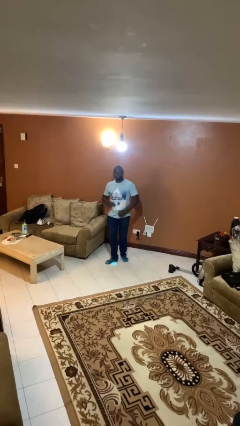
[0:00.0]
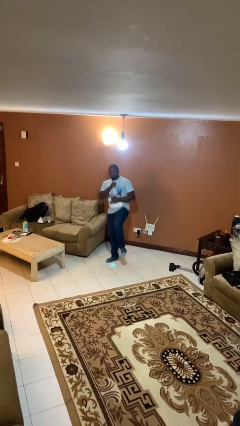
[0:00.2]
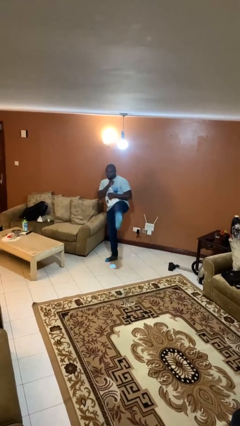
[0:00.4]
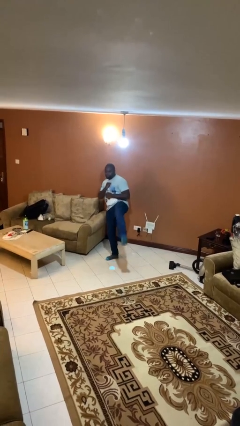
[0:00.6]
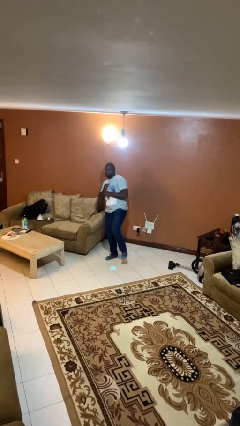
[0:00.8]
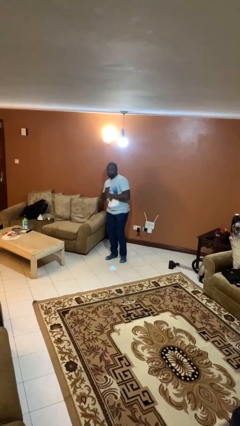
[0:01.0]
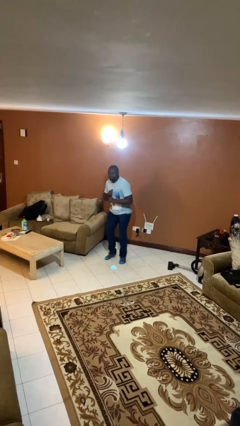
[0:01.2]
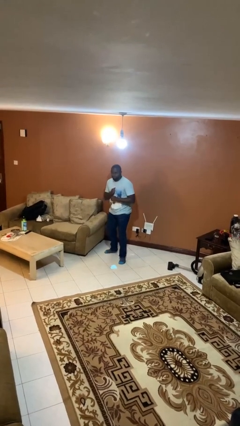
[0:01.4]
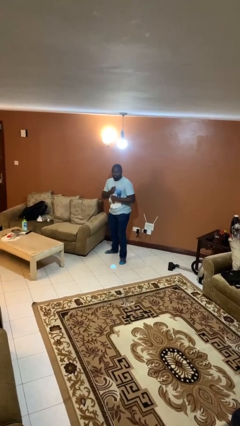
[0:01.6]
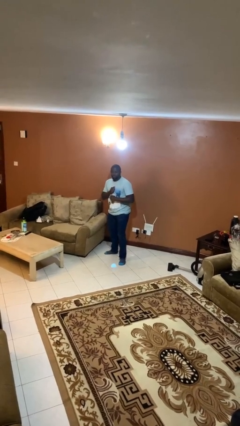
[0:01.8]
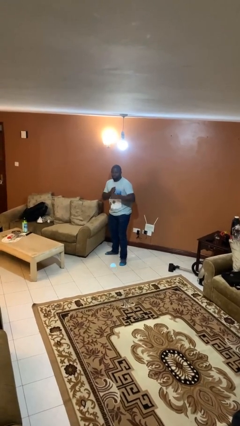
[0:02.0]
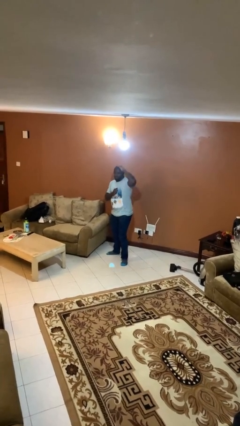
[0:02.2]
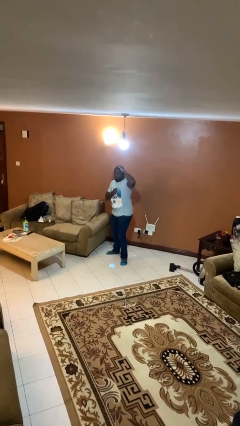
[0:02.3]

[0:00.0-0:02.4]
person karate kicks

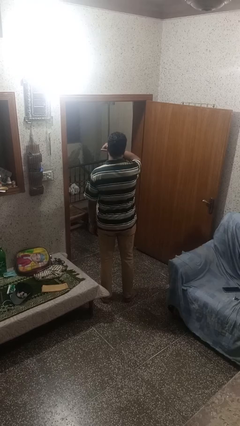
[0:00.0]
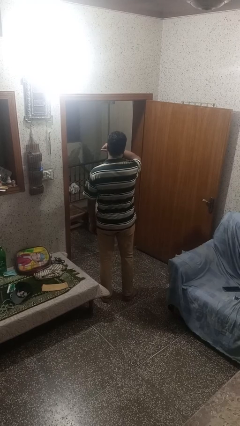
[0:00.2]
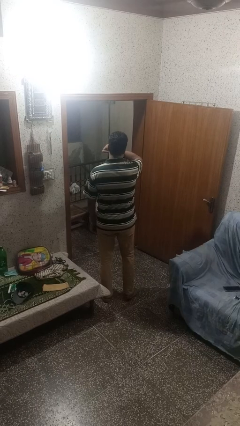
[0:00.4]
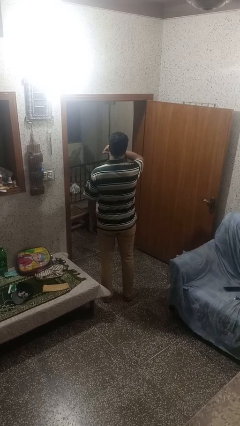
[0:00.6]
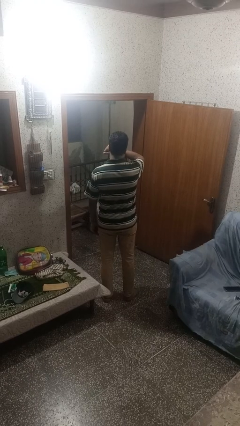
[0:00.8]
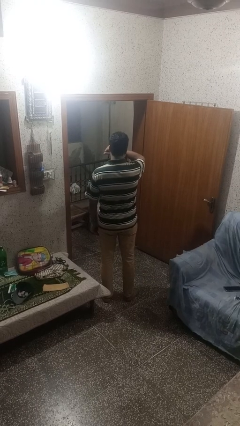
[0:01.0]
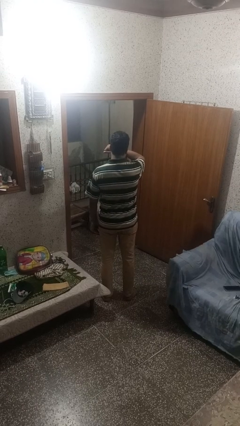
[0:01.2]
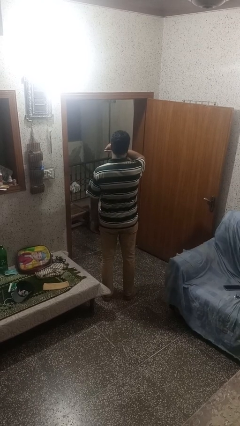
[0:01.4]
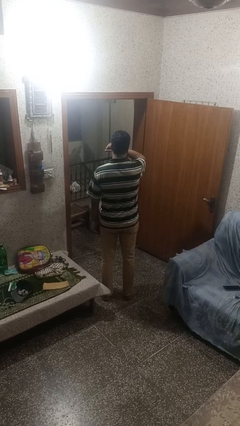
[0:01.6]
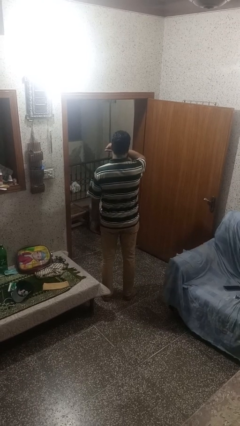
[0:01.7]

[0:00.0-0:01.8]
person karate chop

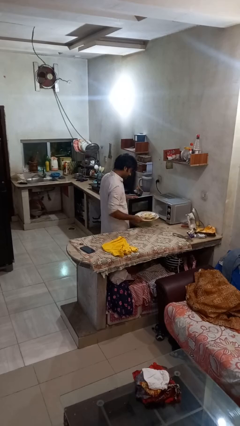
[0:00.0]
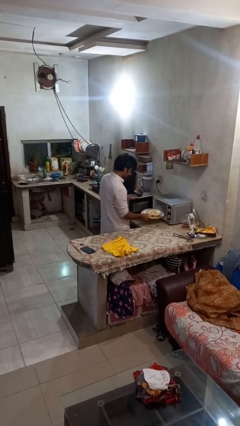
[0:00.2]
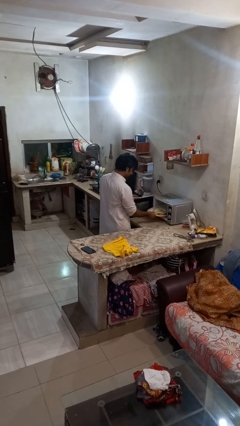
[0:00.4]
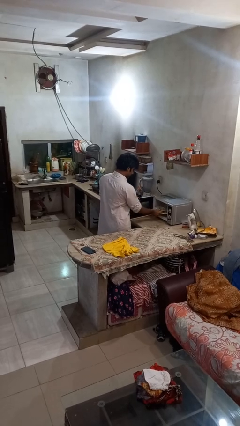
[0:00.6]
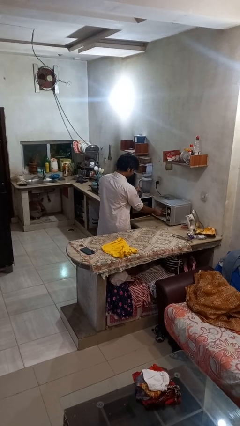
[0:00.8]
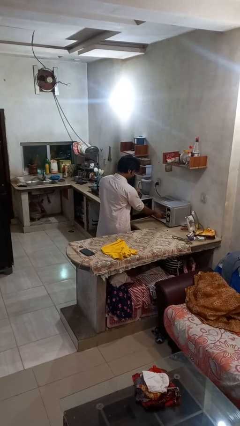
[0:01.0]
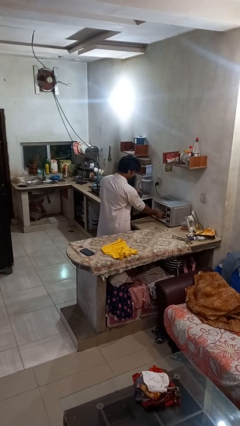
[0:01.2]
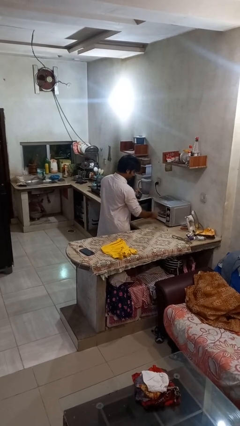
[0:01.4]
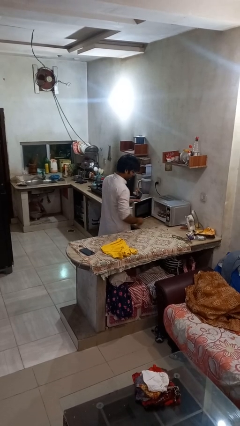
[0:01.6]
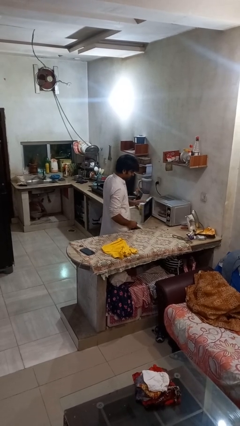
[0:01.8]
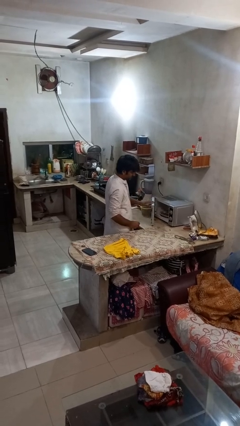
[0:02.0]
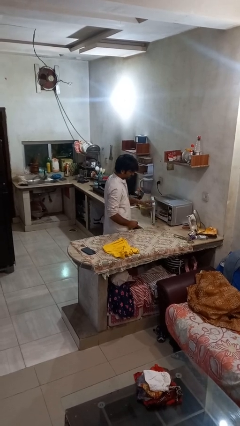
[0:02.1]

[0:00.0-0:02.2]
person puts object into microwave

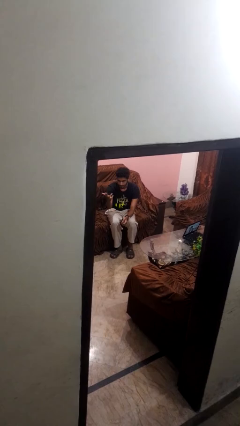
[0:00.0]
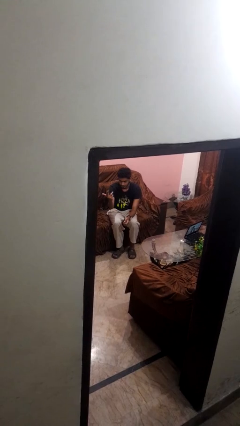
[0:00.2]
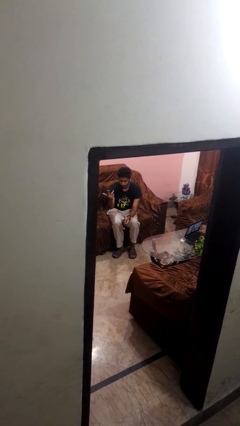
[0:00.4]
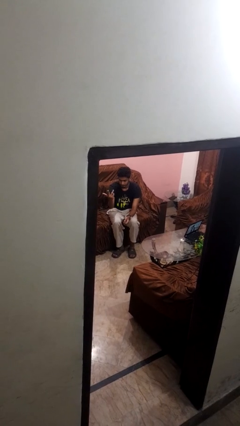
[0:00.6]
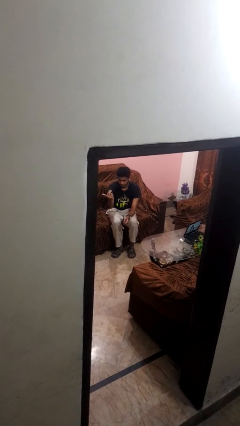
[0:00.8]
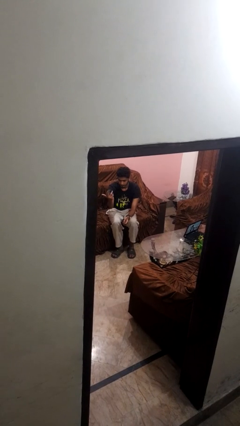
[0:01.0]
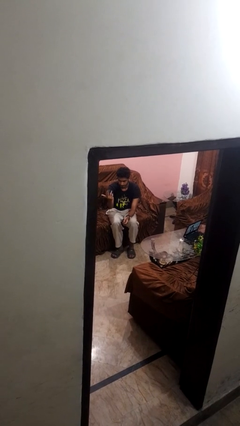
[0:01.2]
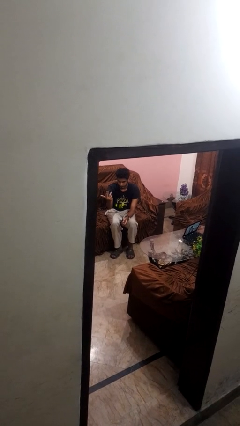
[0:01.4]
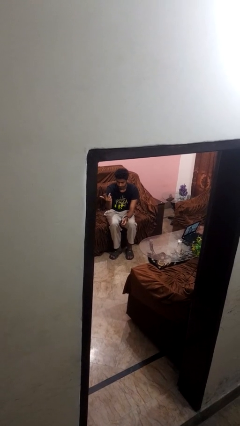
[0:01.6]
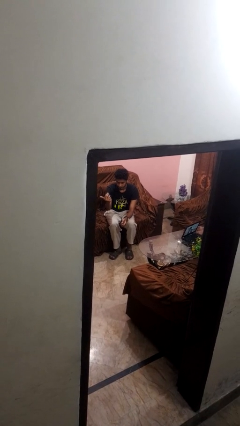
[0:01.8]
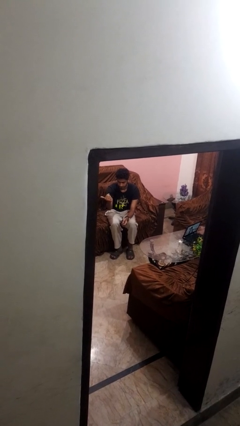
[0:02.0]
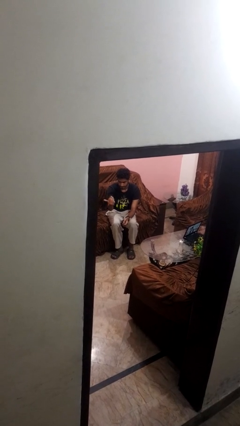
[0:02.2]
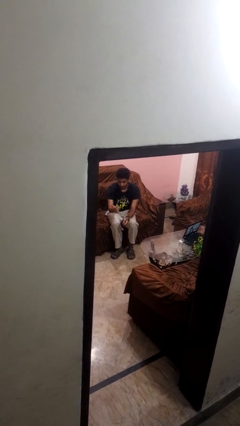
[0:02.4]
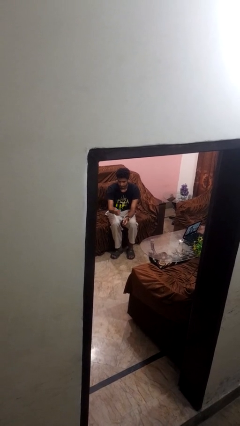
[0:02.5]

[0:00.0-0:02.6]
person gestures come here

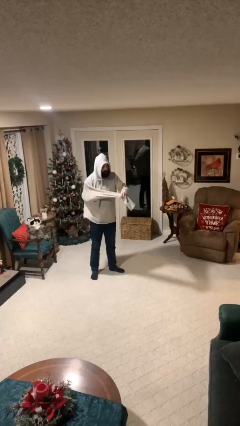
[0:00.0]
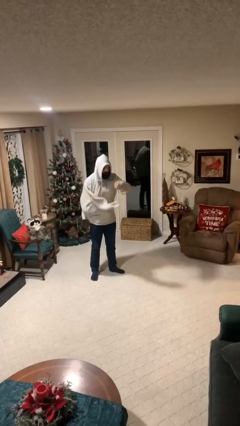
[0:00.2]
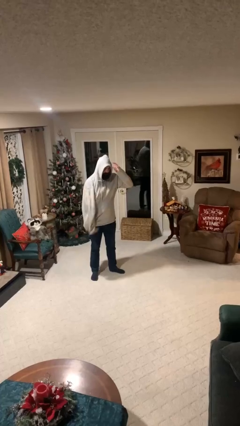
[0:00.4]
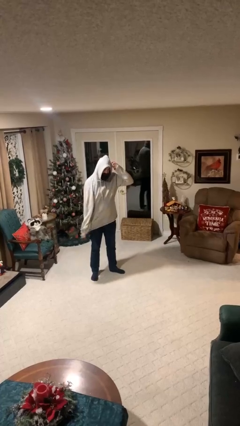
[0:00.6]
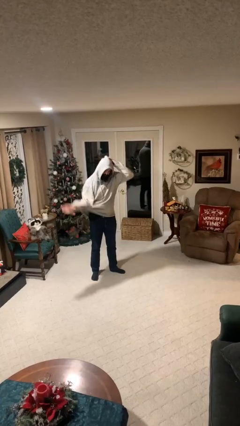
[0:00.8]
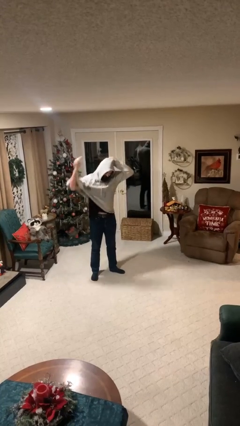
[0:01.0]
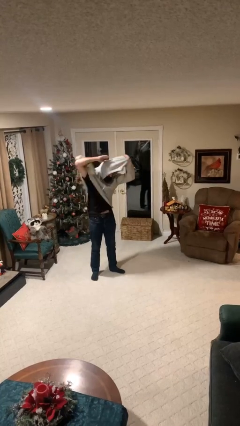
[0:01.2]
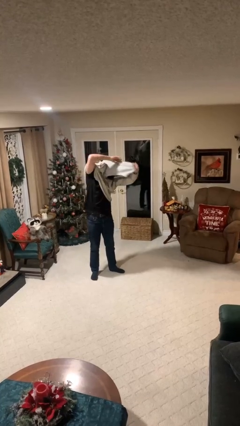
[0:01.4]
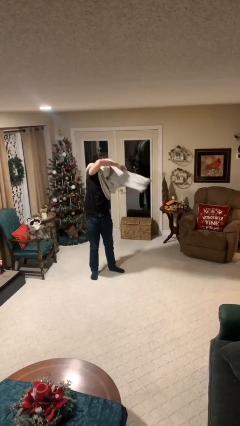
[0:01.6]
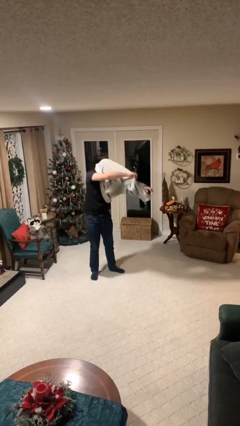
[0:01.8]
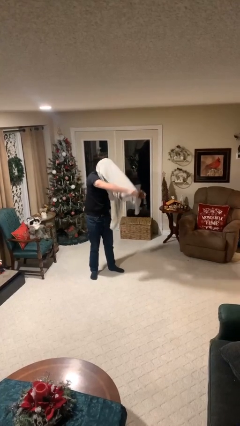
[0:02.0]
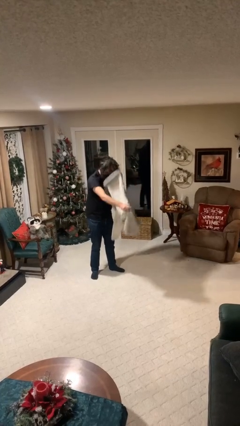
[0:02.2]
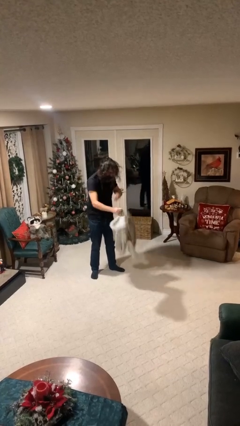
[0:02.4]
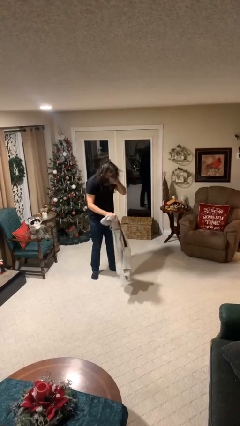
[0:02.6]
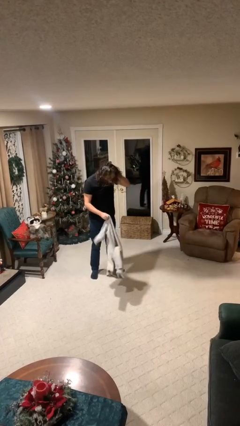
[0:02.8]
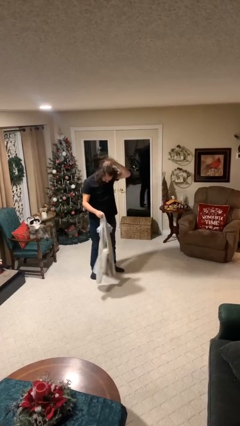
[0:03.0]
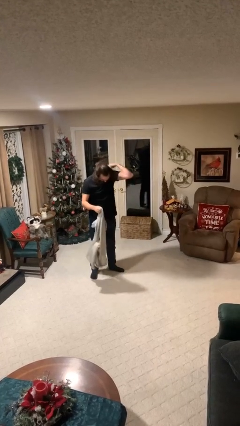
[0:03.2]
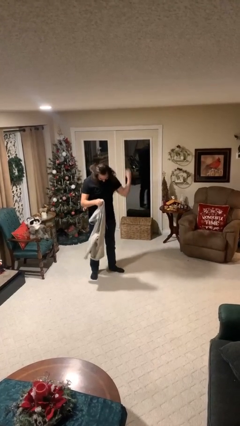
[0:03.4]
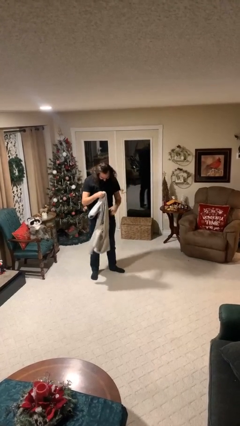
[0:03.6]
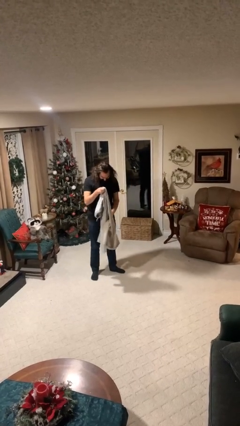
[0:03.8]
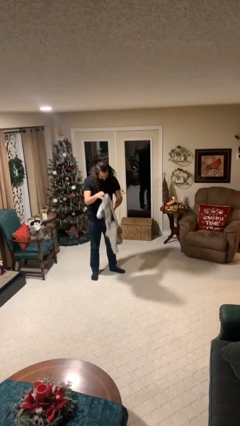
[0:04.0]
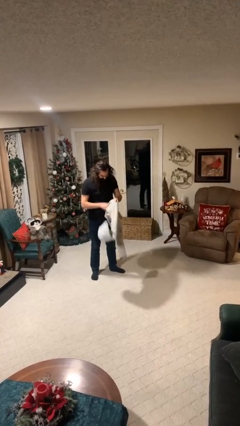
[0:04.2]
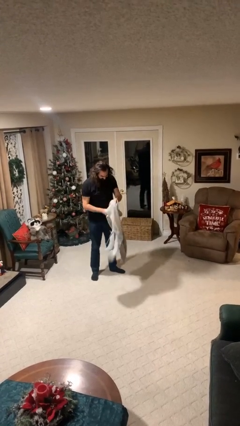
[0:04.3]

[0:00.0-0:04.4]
person takes off hoodie

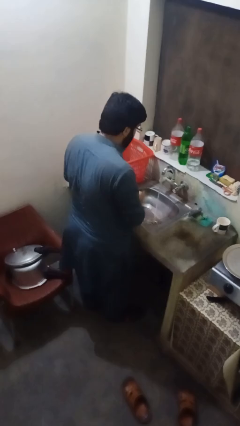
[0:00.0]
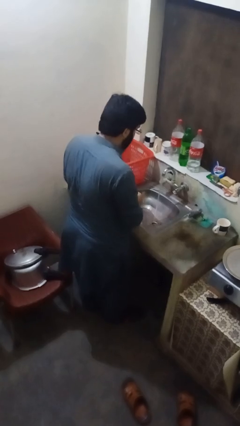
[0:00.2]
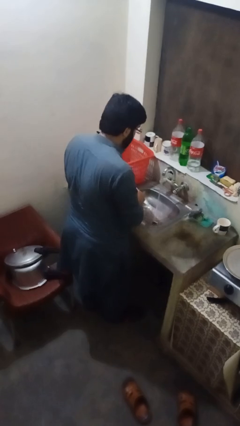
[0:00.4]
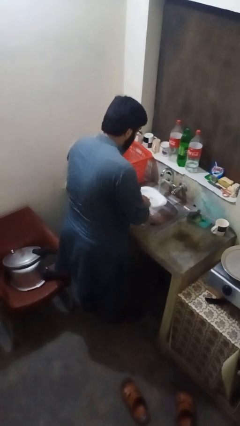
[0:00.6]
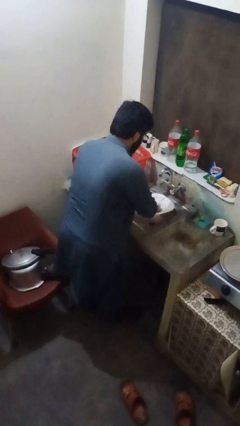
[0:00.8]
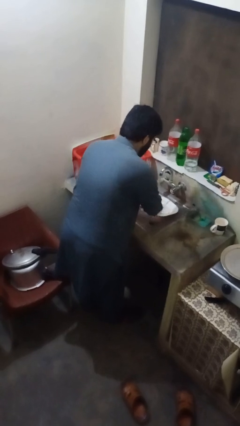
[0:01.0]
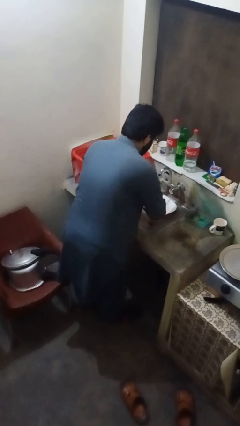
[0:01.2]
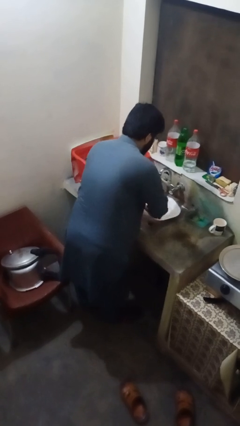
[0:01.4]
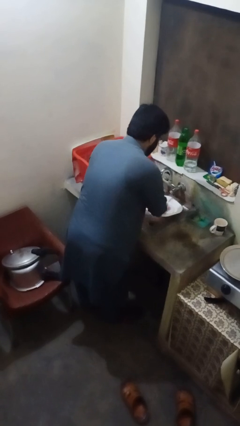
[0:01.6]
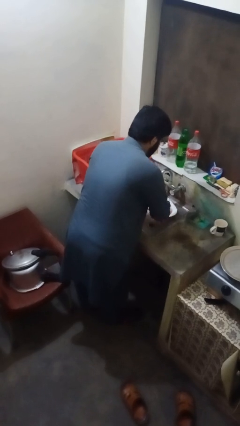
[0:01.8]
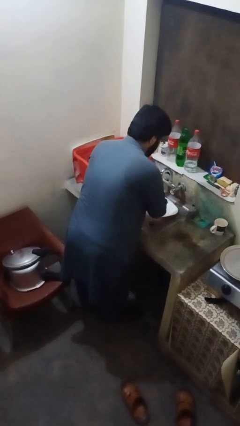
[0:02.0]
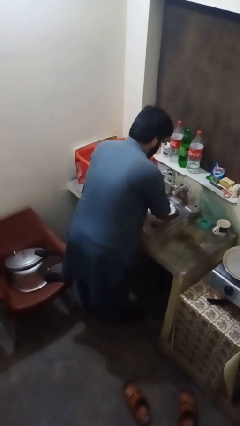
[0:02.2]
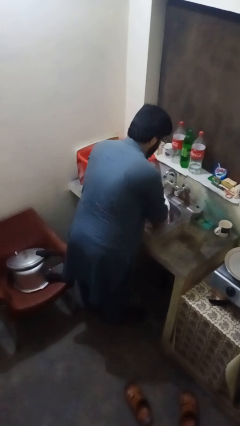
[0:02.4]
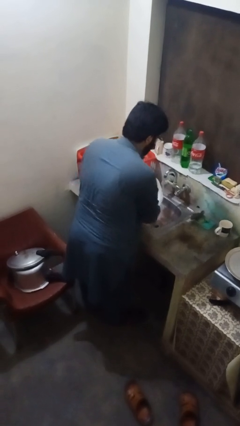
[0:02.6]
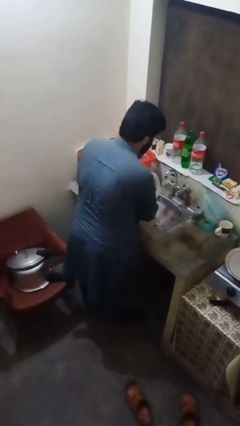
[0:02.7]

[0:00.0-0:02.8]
person washes dish

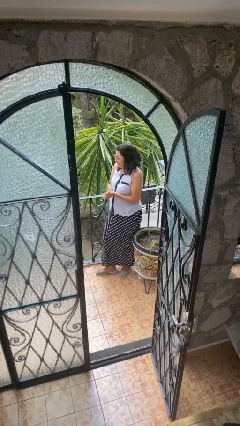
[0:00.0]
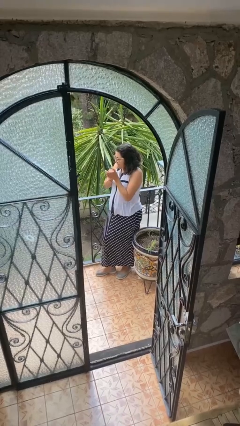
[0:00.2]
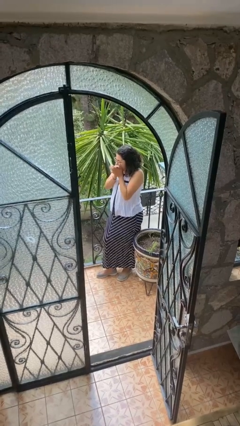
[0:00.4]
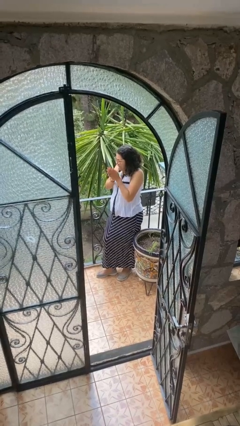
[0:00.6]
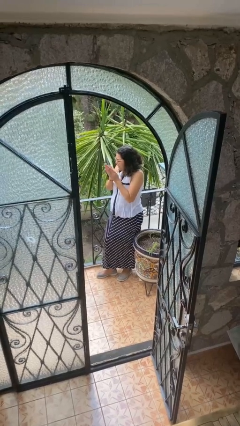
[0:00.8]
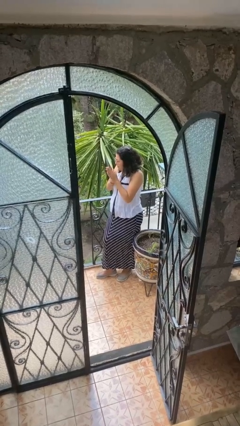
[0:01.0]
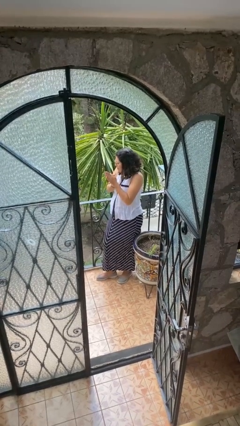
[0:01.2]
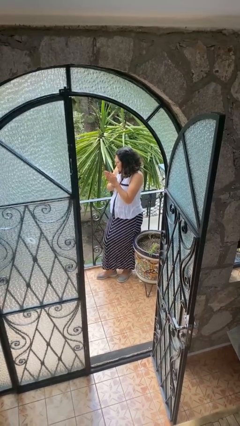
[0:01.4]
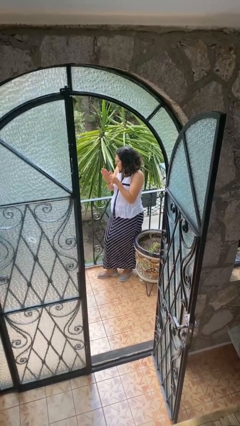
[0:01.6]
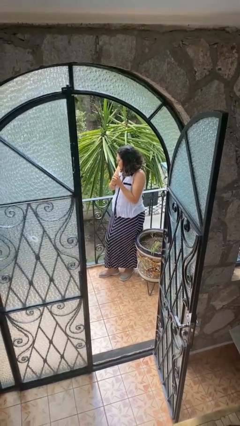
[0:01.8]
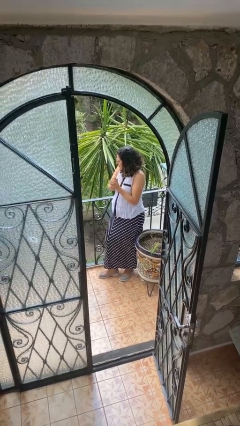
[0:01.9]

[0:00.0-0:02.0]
person blows into hands
